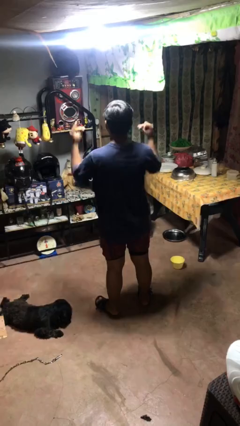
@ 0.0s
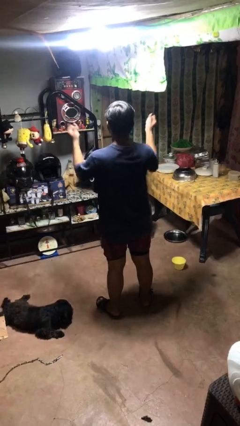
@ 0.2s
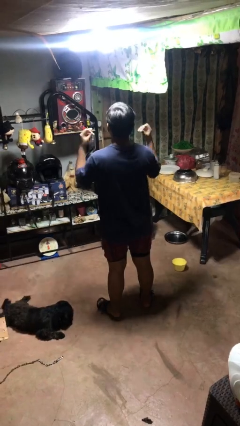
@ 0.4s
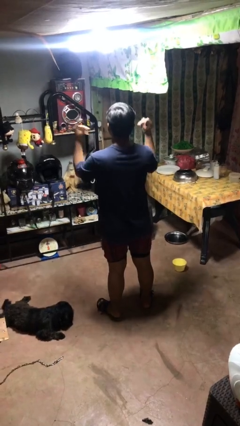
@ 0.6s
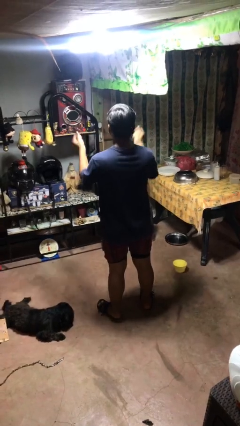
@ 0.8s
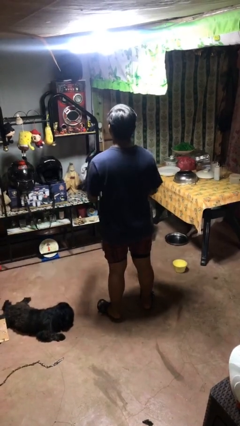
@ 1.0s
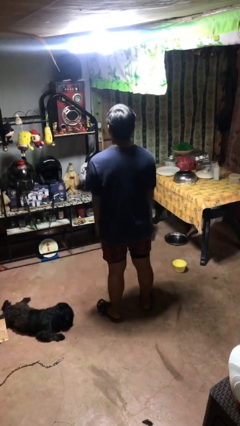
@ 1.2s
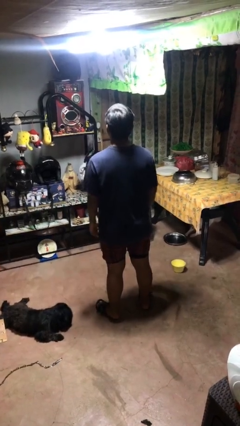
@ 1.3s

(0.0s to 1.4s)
person snaps fingers

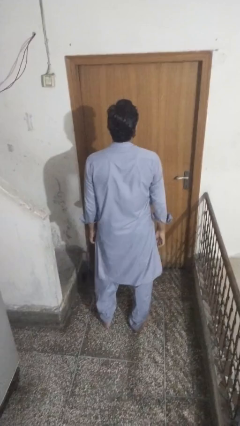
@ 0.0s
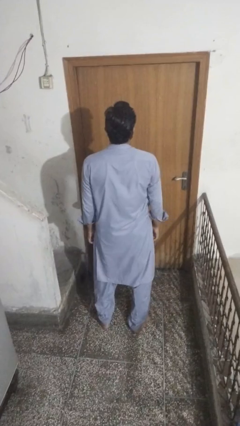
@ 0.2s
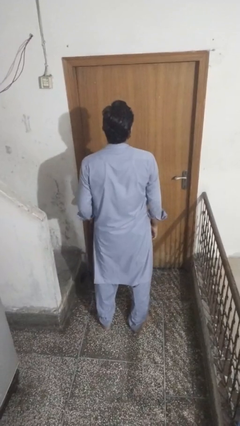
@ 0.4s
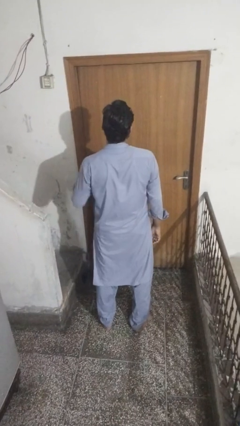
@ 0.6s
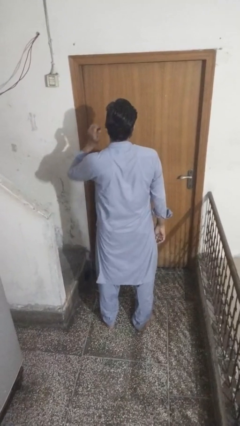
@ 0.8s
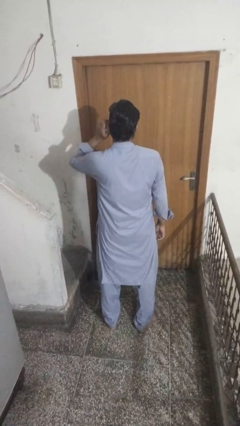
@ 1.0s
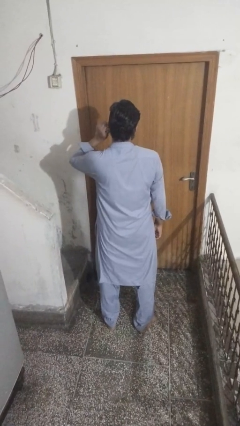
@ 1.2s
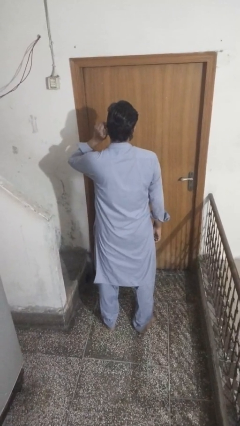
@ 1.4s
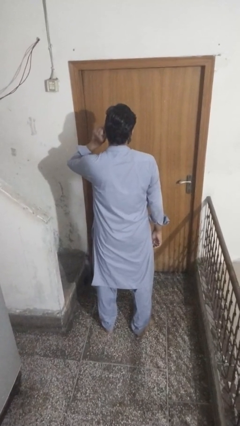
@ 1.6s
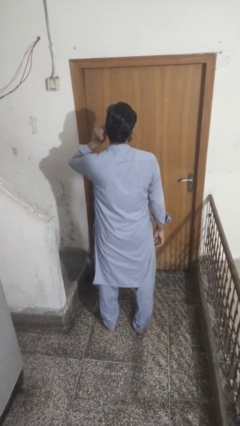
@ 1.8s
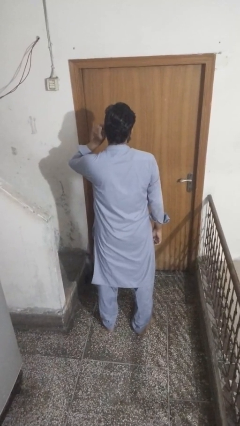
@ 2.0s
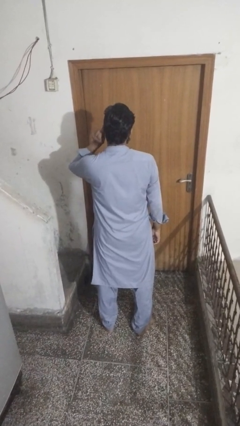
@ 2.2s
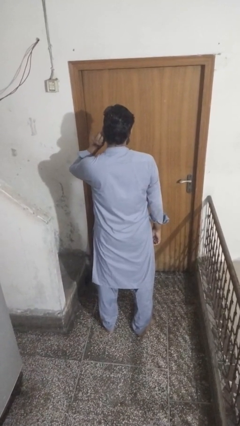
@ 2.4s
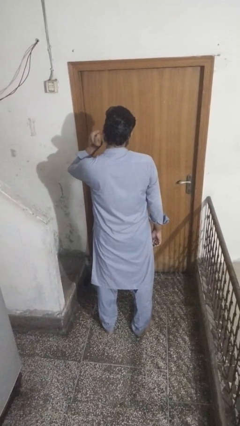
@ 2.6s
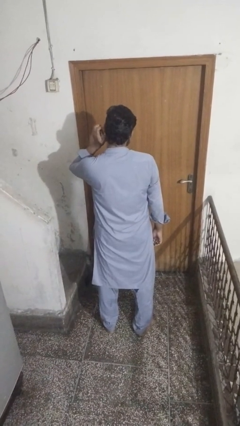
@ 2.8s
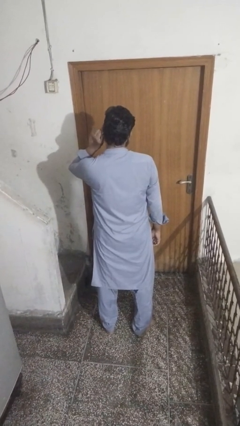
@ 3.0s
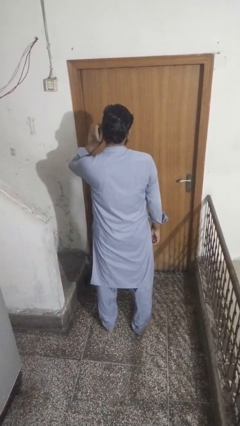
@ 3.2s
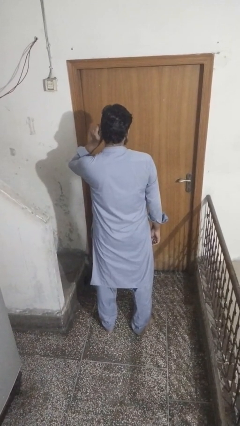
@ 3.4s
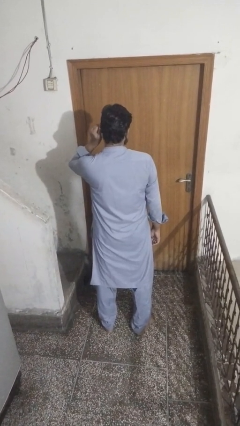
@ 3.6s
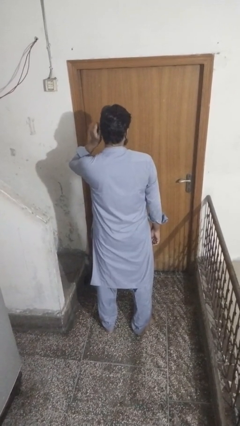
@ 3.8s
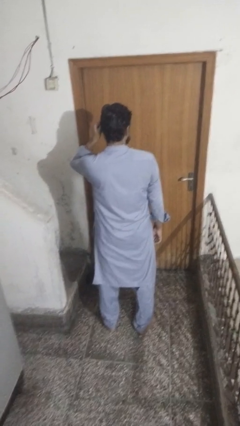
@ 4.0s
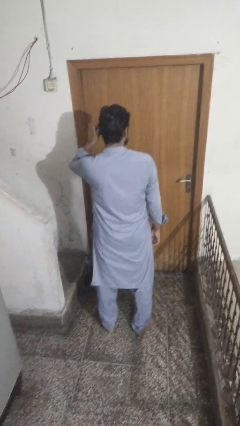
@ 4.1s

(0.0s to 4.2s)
person touches earlobe

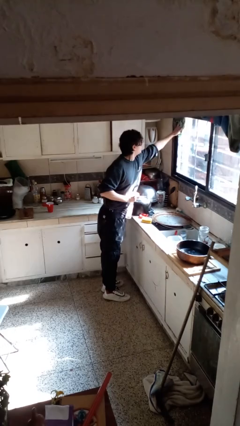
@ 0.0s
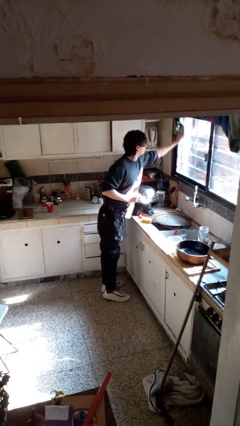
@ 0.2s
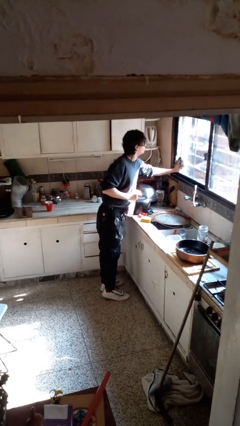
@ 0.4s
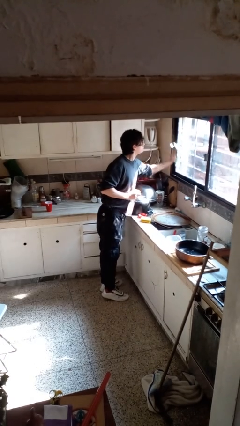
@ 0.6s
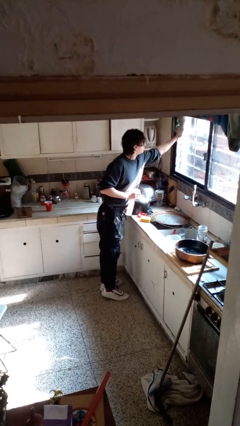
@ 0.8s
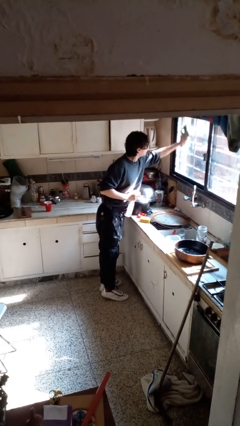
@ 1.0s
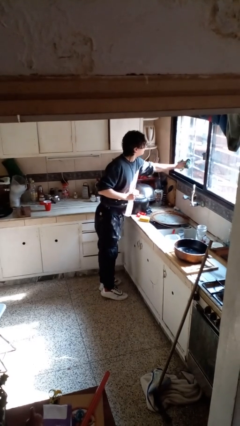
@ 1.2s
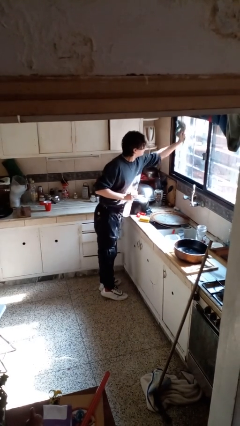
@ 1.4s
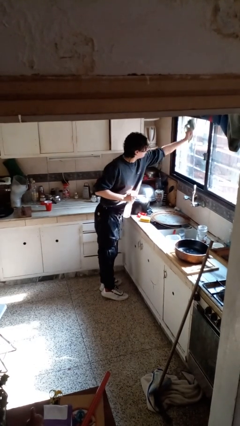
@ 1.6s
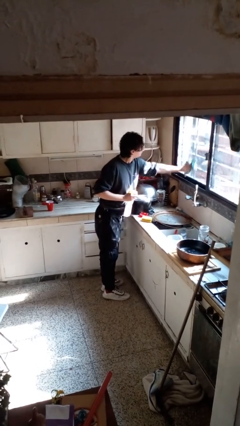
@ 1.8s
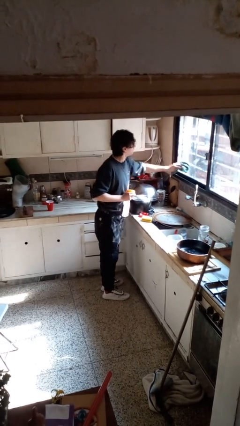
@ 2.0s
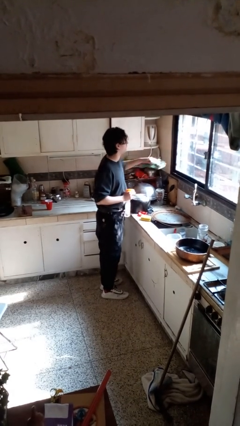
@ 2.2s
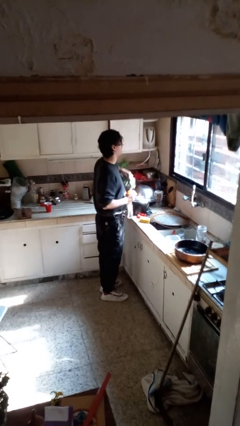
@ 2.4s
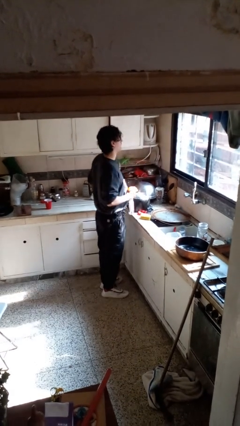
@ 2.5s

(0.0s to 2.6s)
person washes window

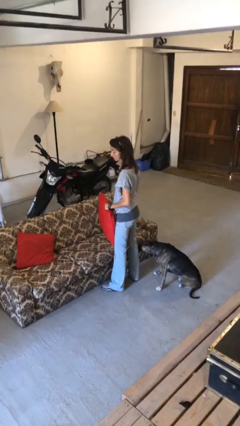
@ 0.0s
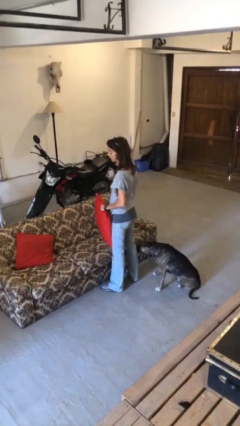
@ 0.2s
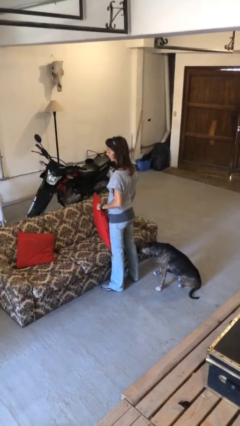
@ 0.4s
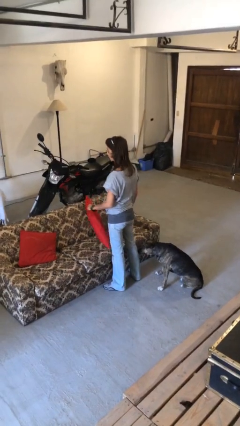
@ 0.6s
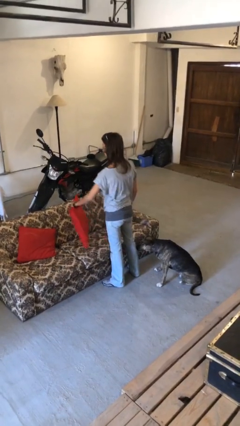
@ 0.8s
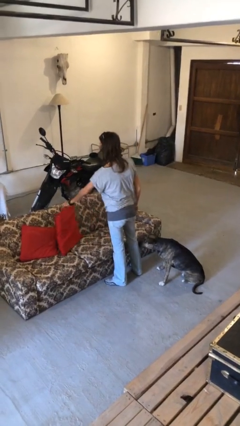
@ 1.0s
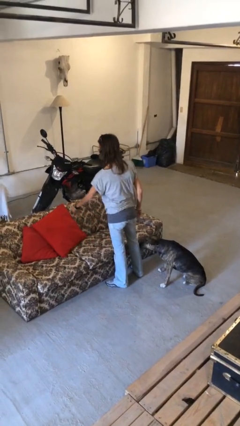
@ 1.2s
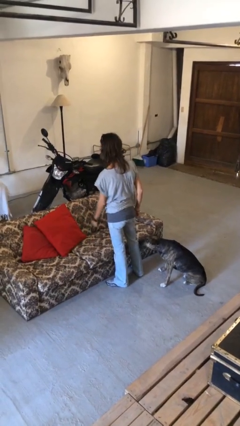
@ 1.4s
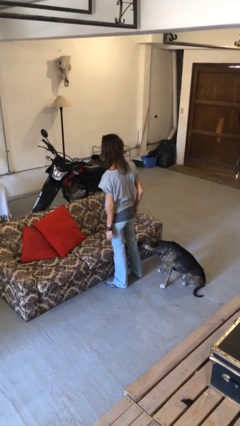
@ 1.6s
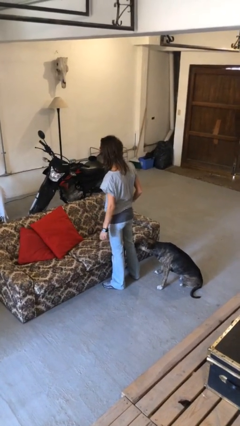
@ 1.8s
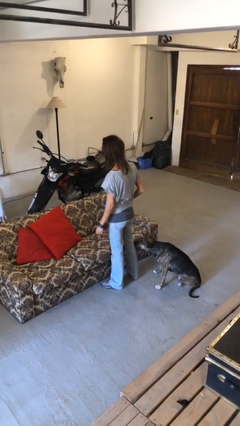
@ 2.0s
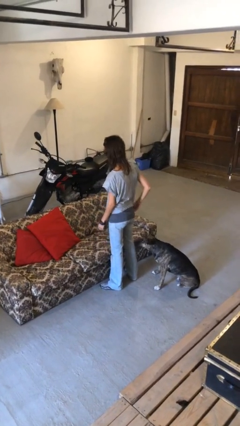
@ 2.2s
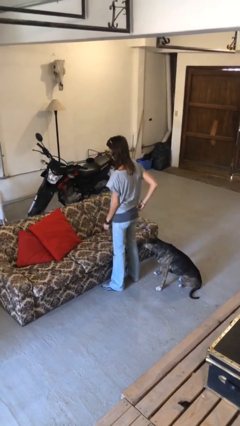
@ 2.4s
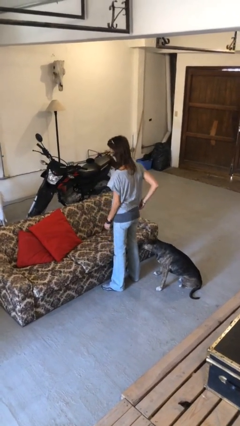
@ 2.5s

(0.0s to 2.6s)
person puts down object on couch

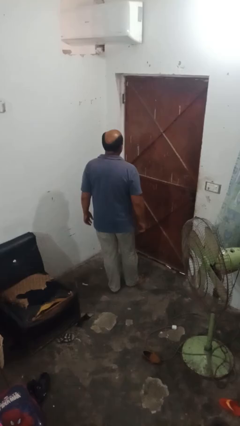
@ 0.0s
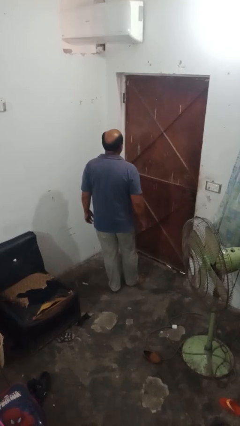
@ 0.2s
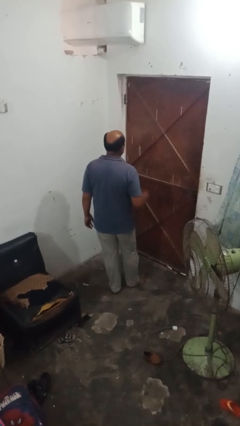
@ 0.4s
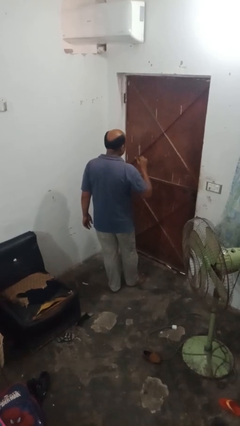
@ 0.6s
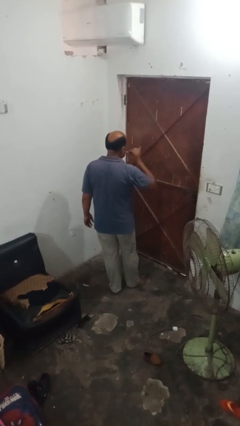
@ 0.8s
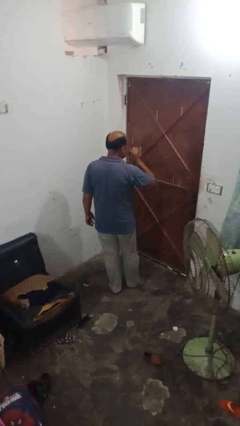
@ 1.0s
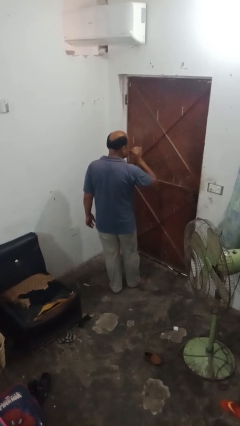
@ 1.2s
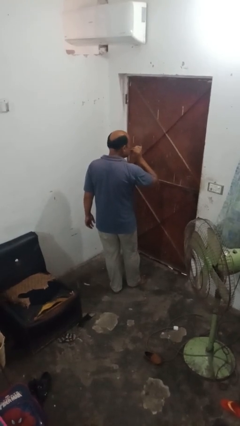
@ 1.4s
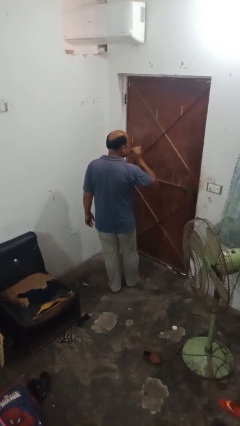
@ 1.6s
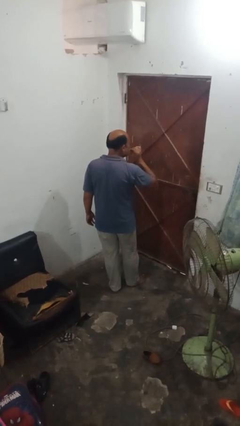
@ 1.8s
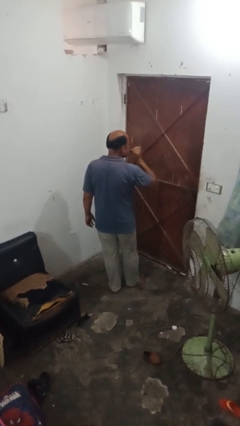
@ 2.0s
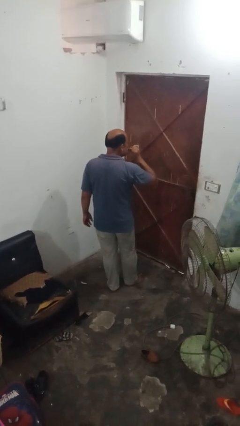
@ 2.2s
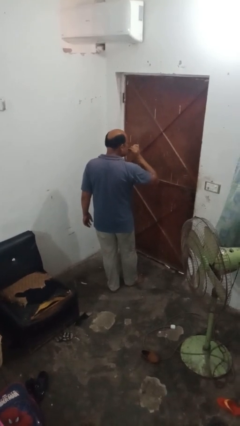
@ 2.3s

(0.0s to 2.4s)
person flosses

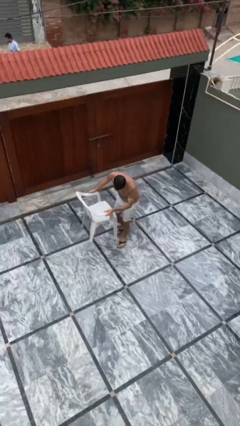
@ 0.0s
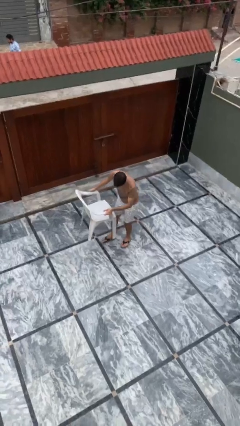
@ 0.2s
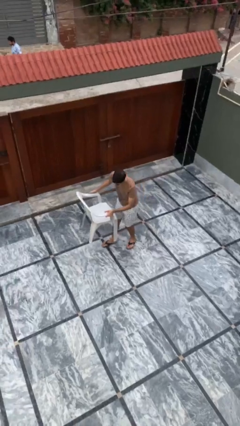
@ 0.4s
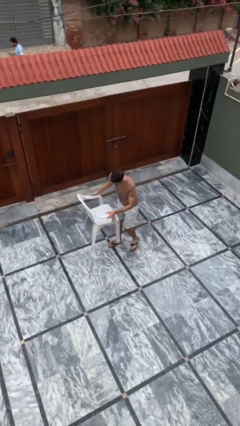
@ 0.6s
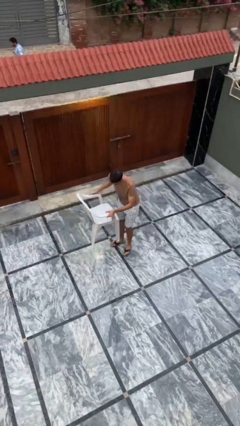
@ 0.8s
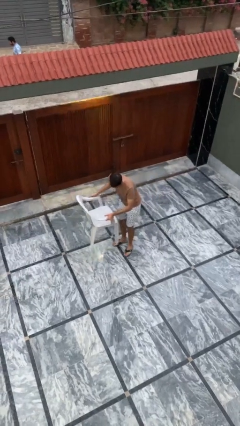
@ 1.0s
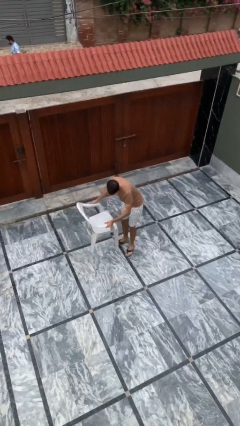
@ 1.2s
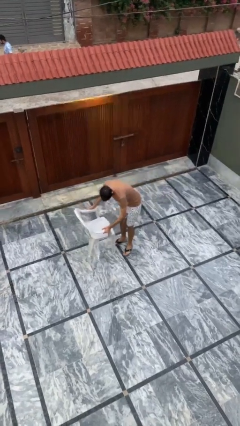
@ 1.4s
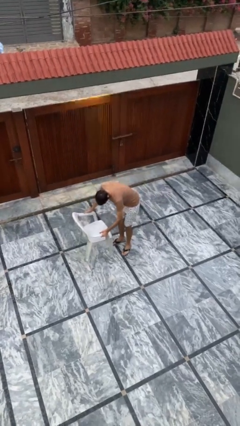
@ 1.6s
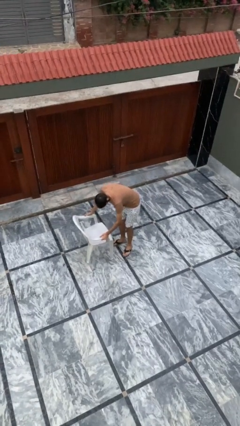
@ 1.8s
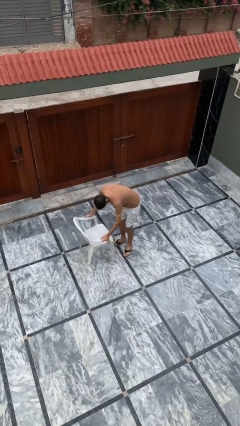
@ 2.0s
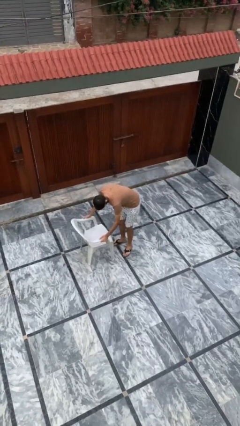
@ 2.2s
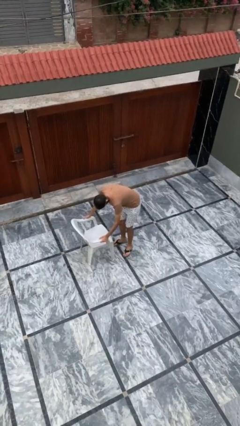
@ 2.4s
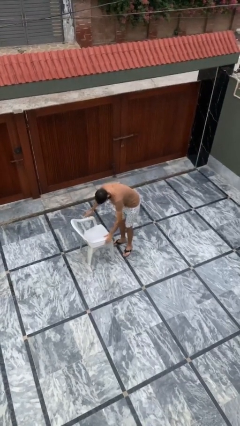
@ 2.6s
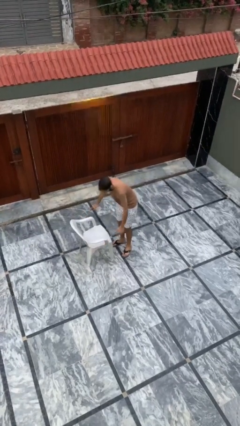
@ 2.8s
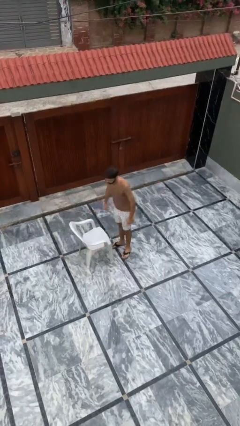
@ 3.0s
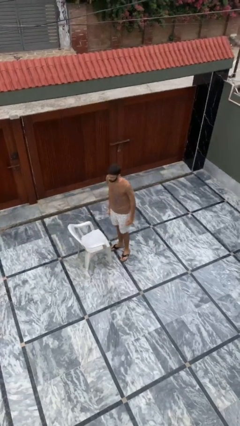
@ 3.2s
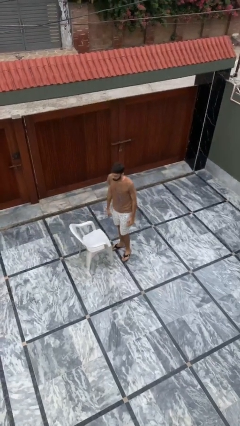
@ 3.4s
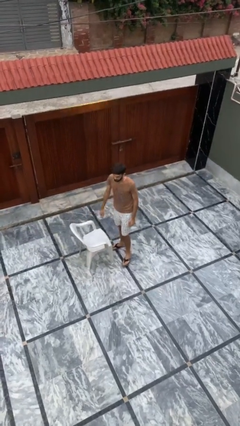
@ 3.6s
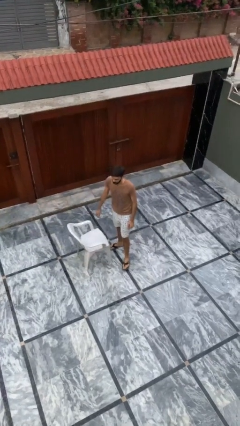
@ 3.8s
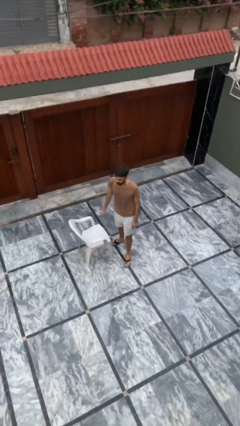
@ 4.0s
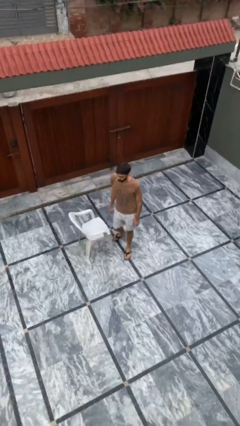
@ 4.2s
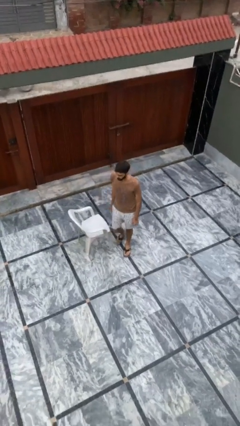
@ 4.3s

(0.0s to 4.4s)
person puts down object on floor
